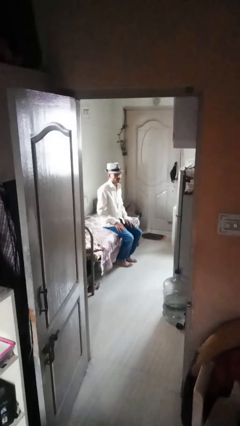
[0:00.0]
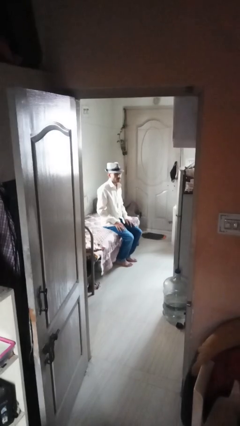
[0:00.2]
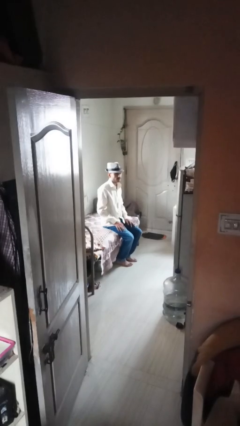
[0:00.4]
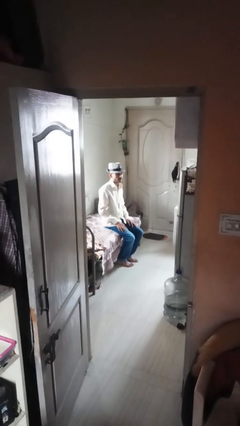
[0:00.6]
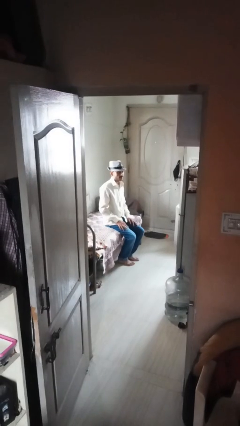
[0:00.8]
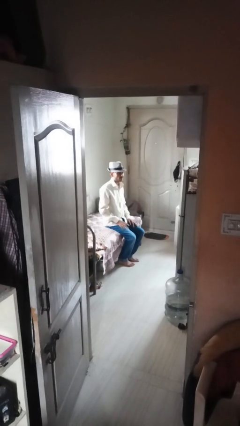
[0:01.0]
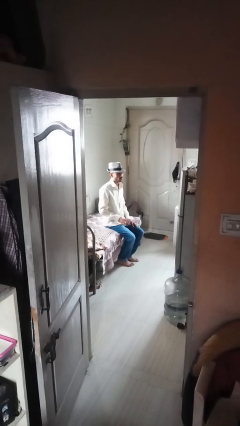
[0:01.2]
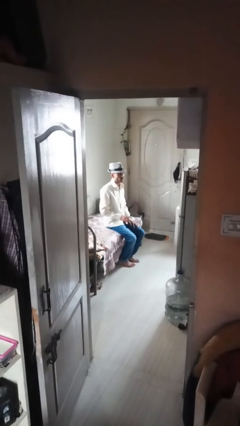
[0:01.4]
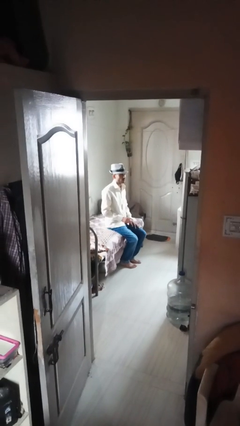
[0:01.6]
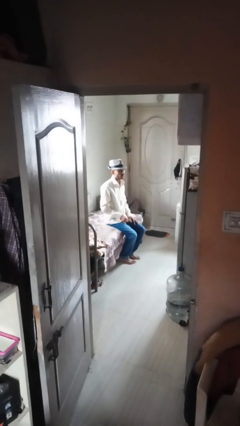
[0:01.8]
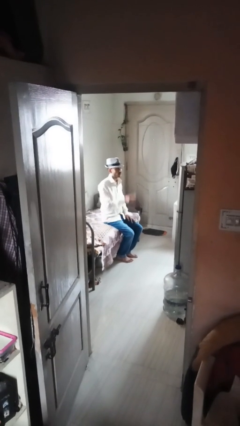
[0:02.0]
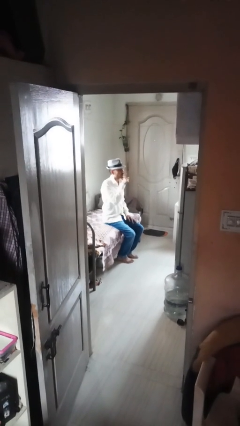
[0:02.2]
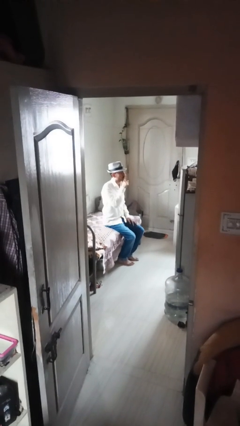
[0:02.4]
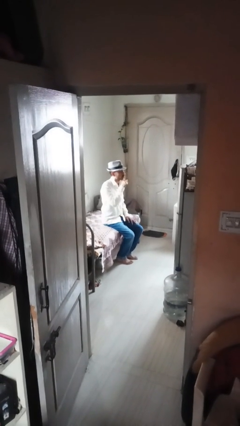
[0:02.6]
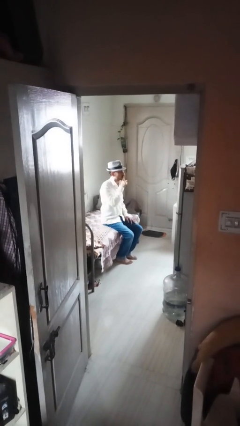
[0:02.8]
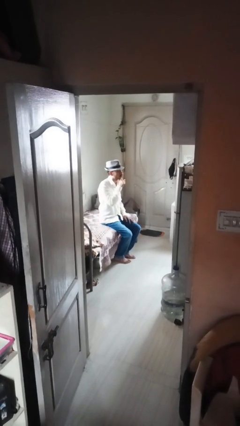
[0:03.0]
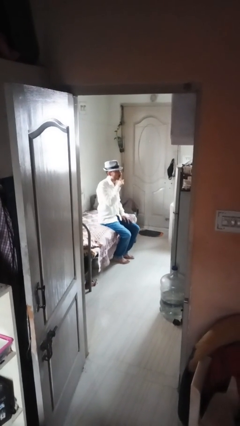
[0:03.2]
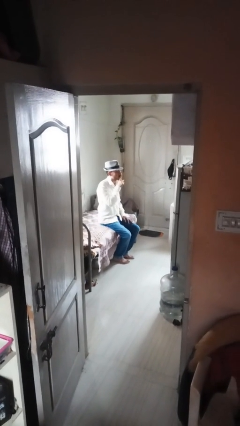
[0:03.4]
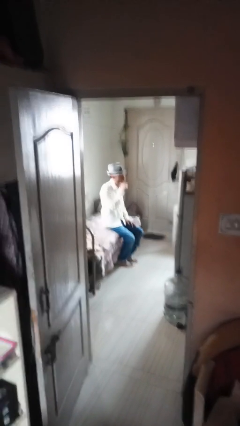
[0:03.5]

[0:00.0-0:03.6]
person gestures be quiet

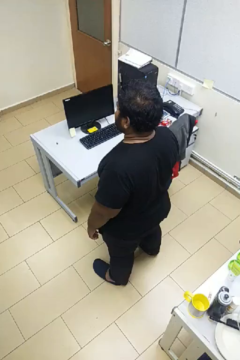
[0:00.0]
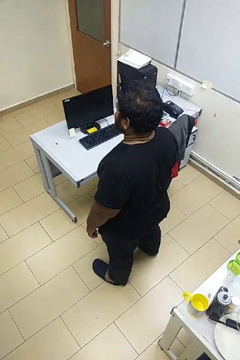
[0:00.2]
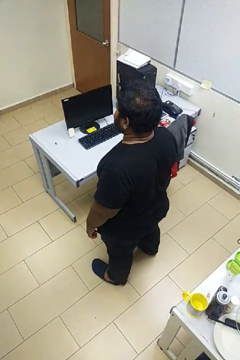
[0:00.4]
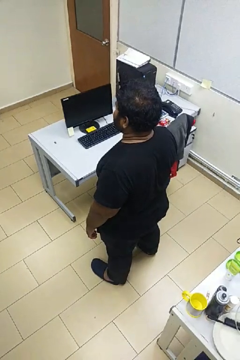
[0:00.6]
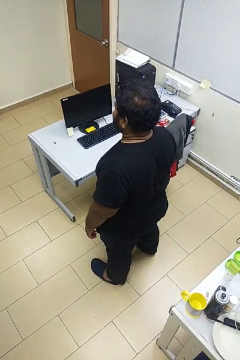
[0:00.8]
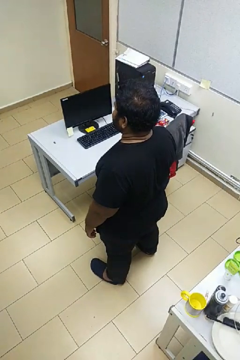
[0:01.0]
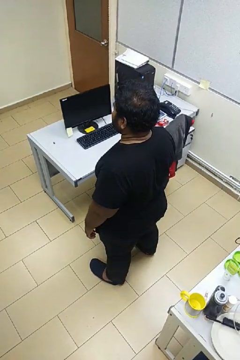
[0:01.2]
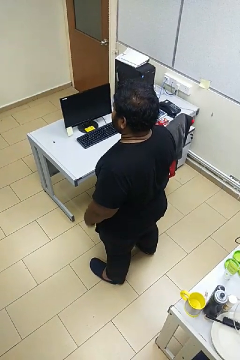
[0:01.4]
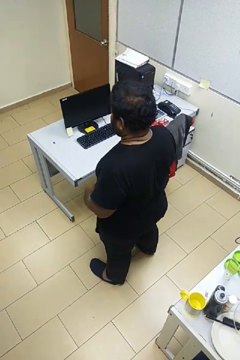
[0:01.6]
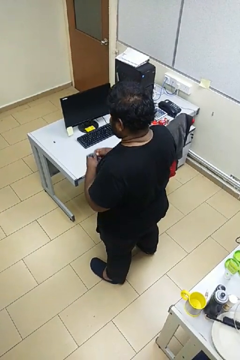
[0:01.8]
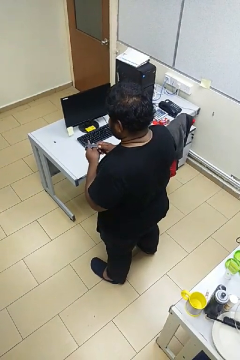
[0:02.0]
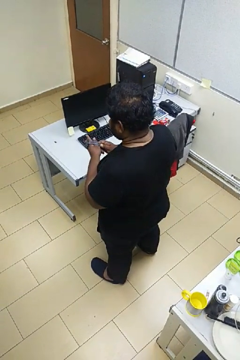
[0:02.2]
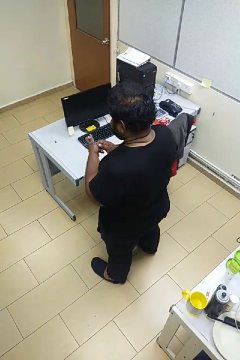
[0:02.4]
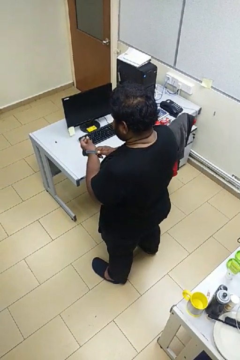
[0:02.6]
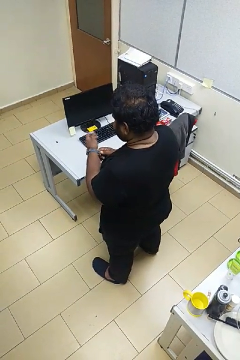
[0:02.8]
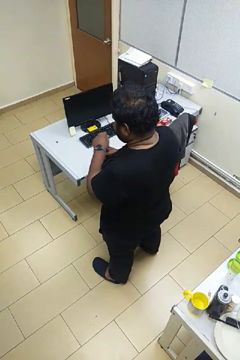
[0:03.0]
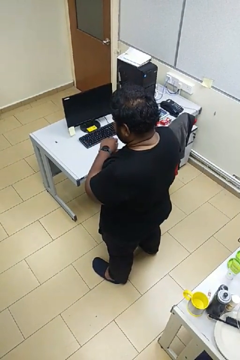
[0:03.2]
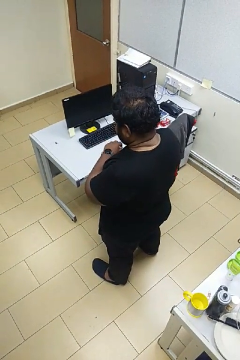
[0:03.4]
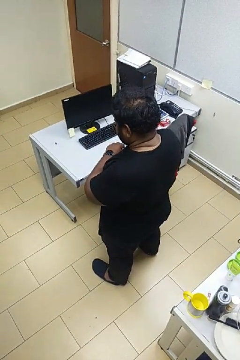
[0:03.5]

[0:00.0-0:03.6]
person puts on wristwatch

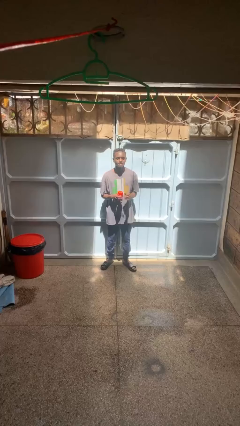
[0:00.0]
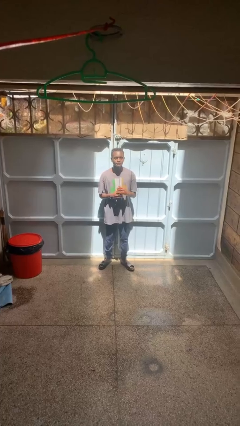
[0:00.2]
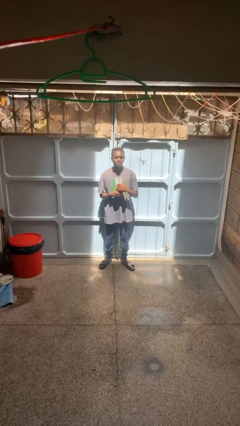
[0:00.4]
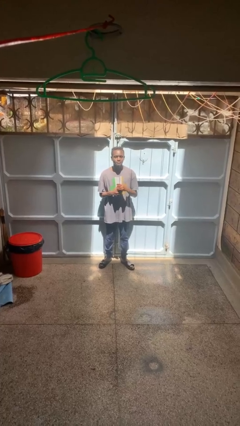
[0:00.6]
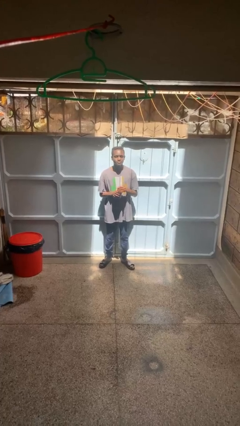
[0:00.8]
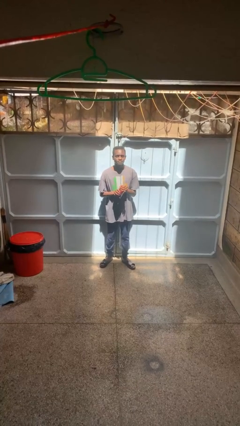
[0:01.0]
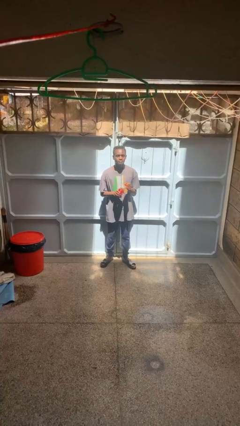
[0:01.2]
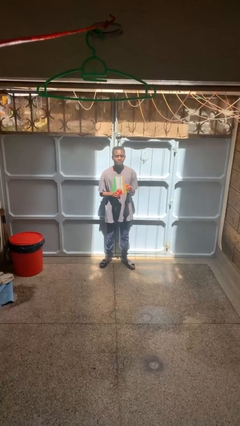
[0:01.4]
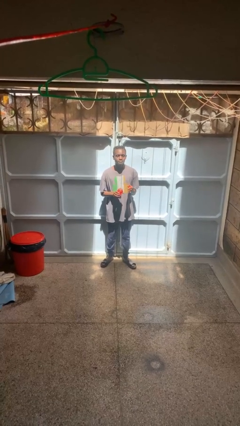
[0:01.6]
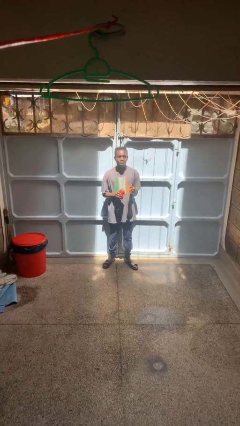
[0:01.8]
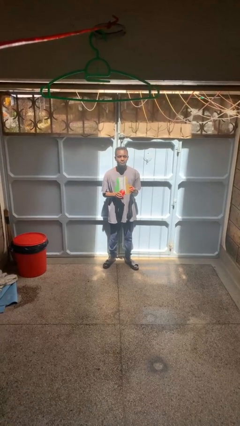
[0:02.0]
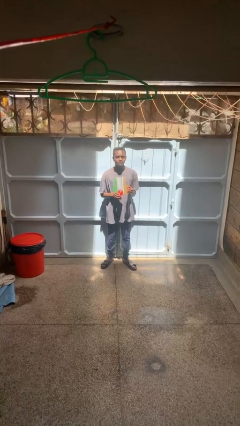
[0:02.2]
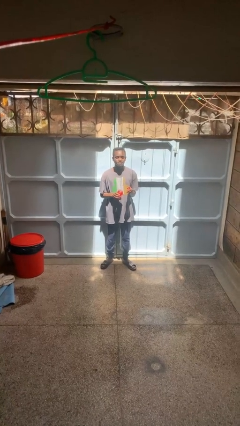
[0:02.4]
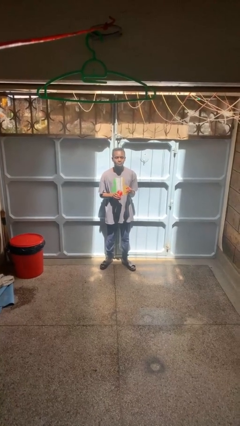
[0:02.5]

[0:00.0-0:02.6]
person opens jar

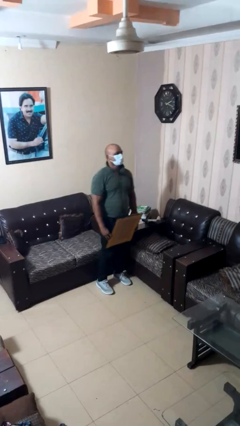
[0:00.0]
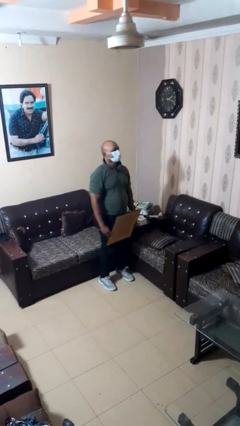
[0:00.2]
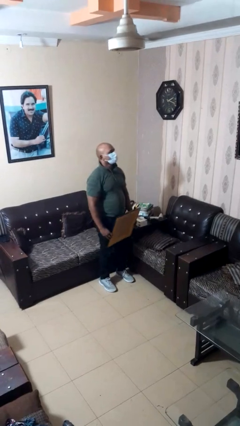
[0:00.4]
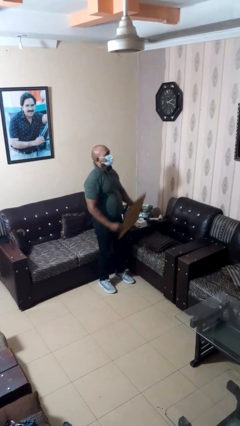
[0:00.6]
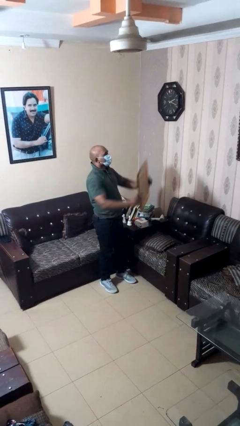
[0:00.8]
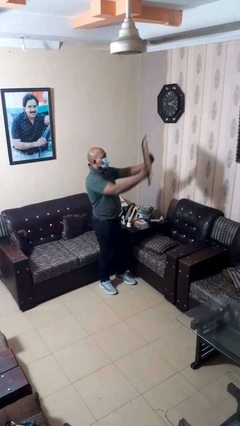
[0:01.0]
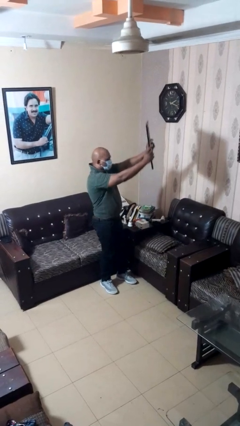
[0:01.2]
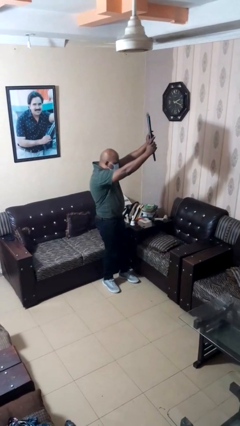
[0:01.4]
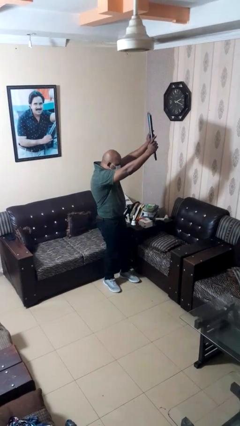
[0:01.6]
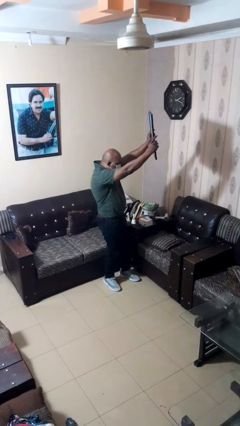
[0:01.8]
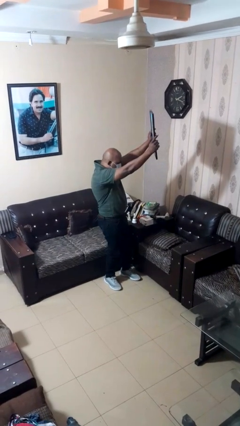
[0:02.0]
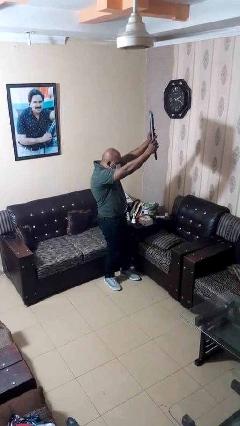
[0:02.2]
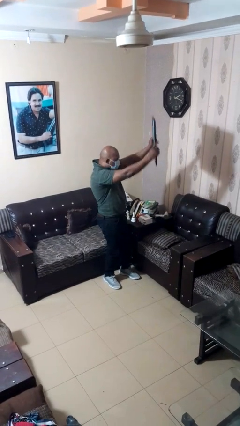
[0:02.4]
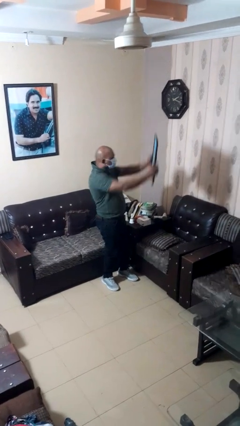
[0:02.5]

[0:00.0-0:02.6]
person holds object above head

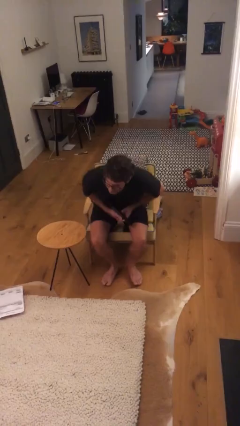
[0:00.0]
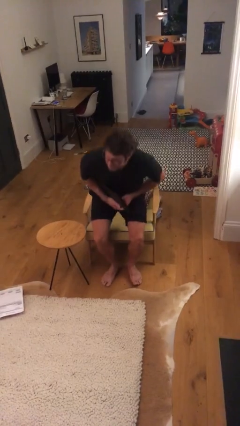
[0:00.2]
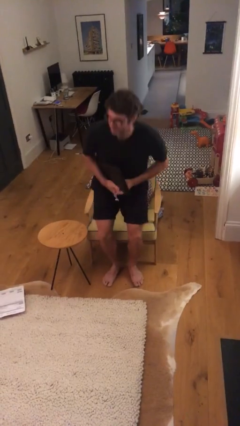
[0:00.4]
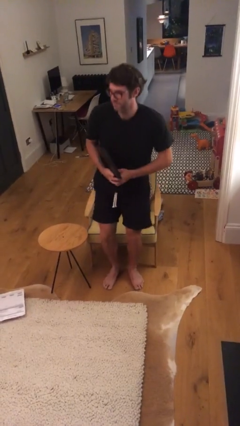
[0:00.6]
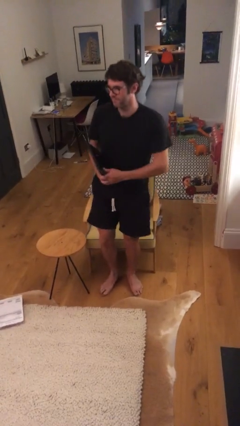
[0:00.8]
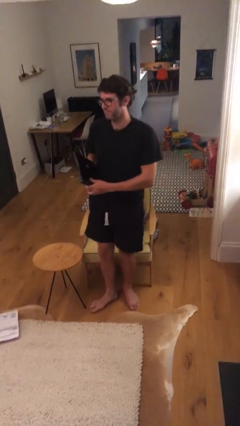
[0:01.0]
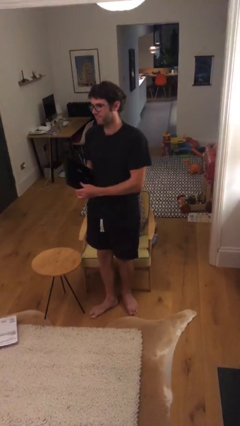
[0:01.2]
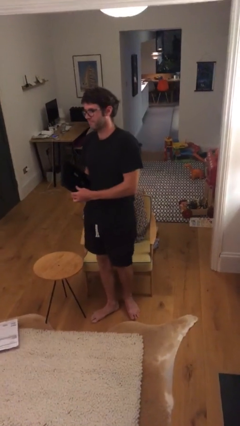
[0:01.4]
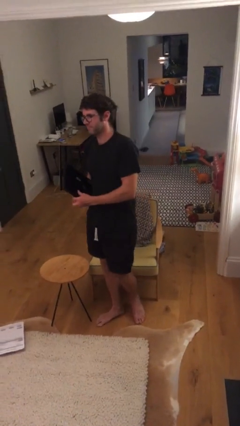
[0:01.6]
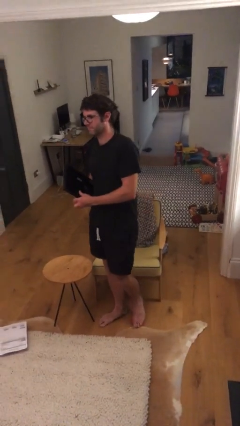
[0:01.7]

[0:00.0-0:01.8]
person stands up

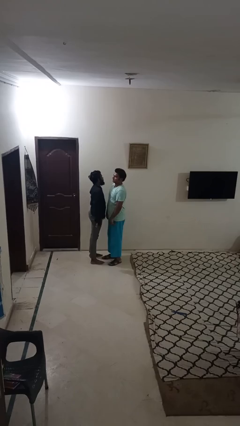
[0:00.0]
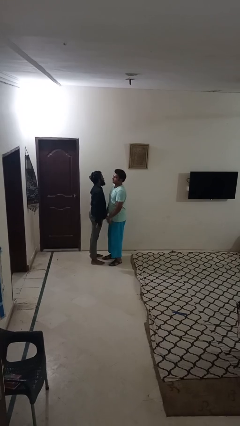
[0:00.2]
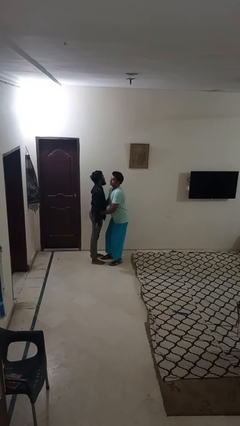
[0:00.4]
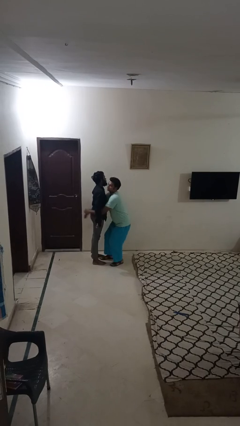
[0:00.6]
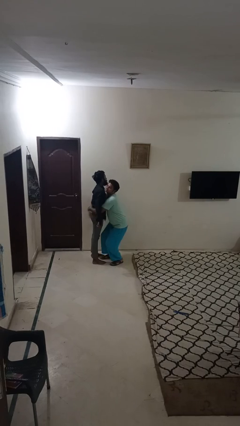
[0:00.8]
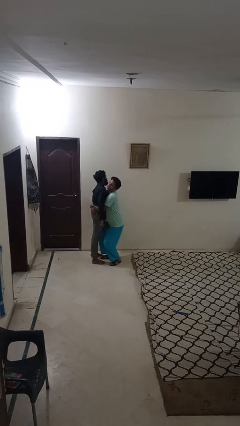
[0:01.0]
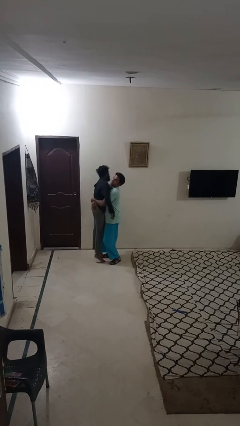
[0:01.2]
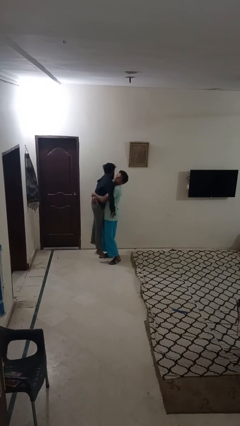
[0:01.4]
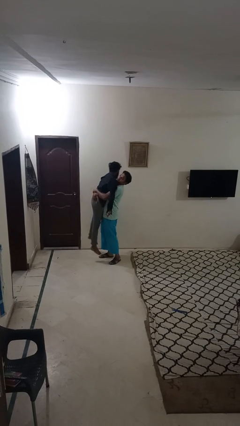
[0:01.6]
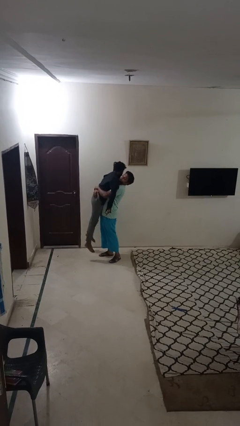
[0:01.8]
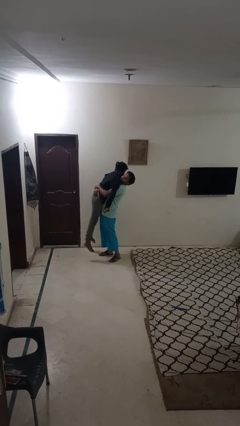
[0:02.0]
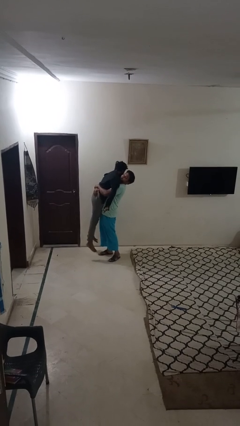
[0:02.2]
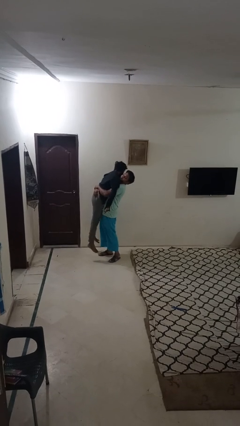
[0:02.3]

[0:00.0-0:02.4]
person picks up person

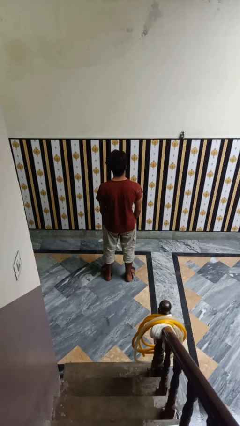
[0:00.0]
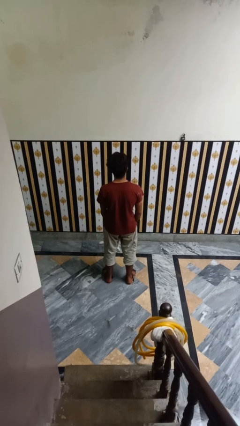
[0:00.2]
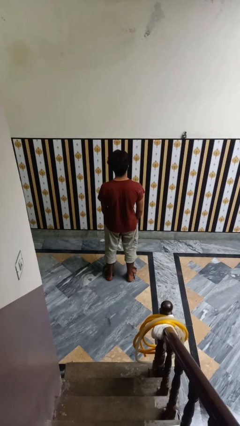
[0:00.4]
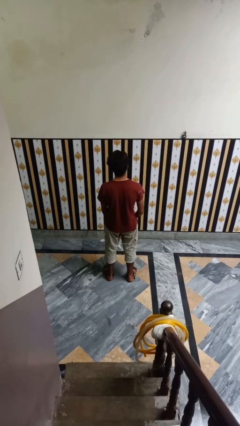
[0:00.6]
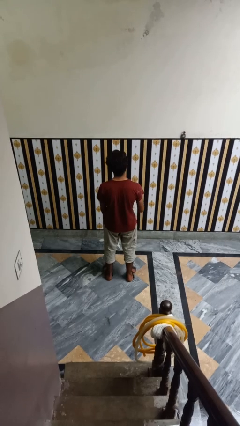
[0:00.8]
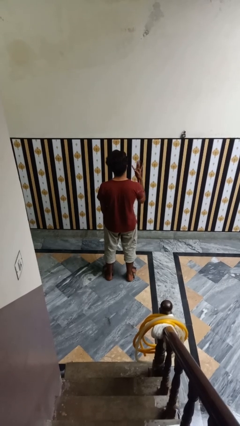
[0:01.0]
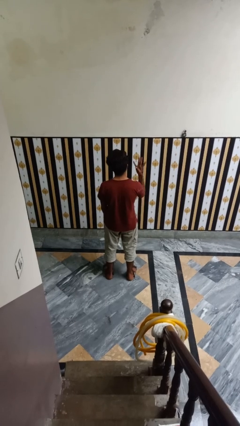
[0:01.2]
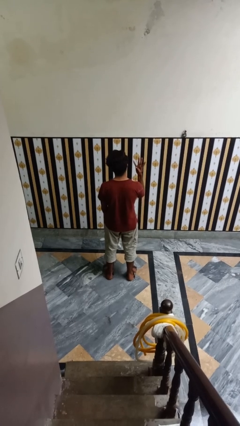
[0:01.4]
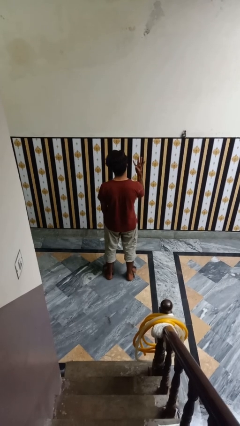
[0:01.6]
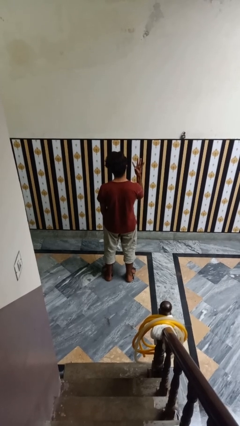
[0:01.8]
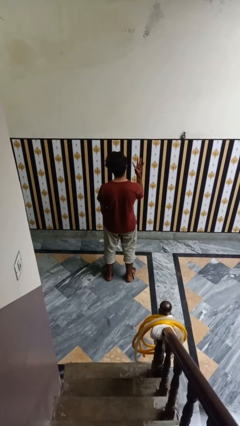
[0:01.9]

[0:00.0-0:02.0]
person gestures number four
